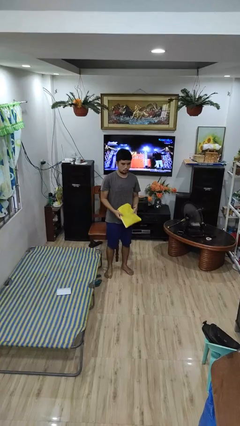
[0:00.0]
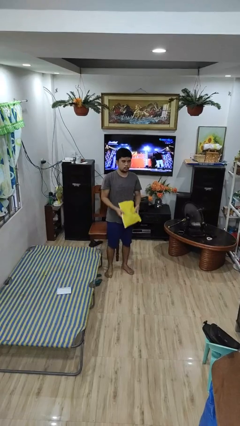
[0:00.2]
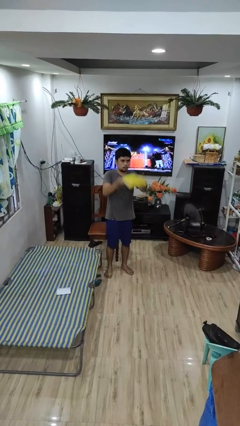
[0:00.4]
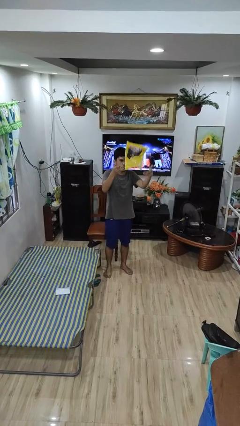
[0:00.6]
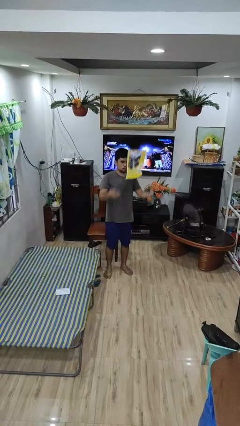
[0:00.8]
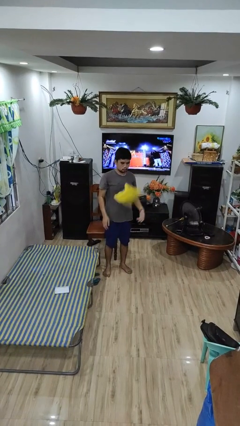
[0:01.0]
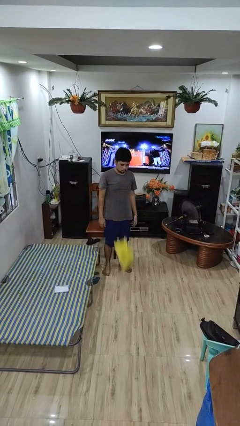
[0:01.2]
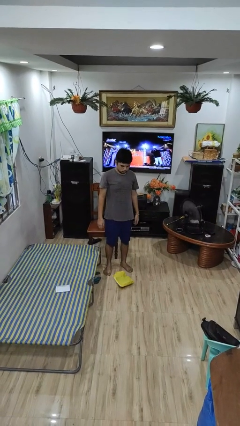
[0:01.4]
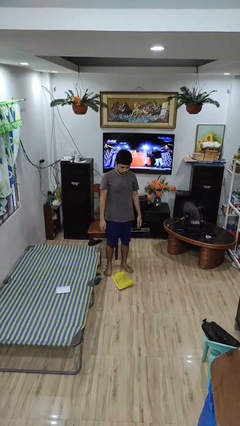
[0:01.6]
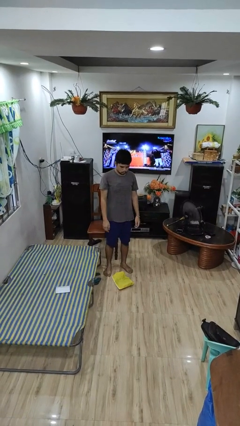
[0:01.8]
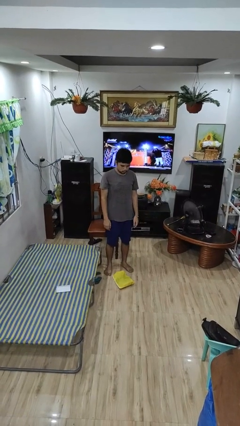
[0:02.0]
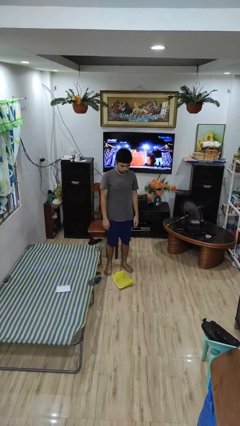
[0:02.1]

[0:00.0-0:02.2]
person throws object into air

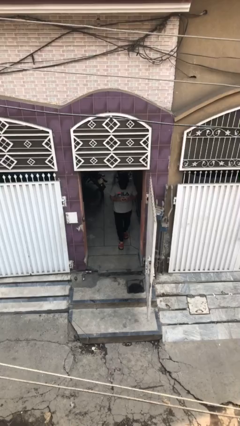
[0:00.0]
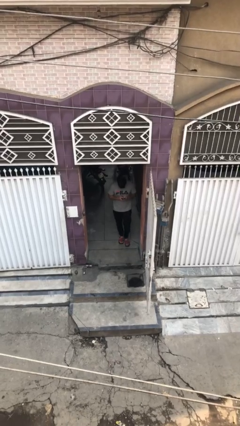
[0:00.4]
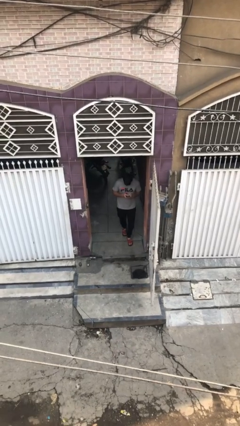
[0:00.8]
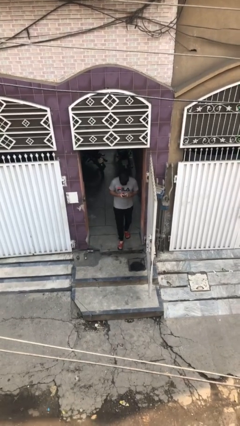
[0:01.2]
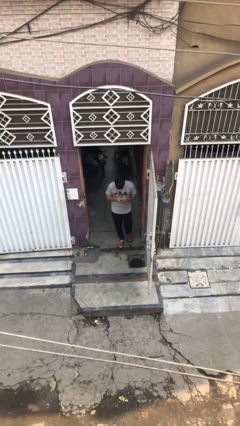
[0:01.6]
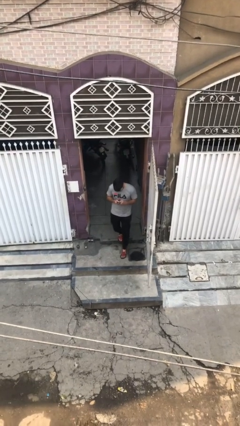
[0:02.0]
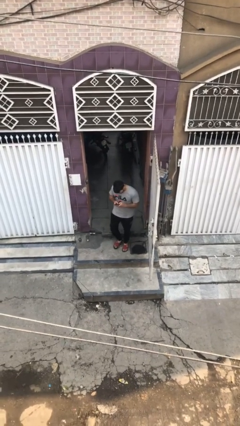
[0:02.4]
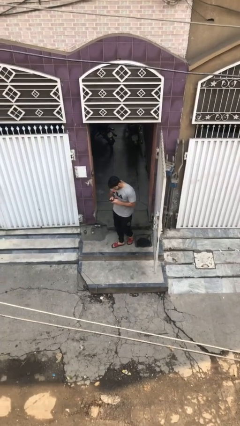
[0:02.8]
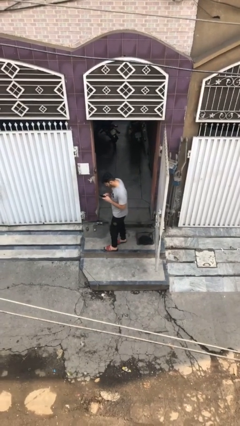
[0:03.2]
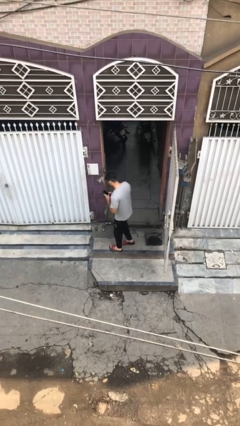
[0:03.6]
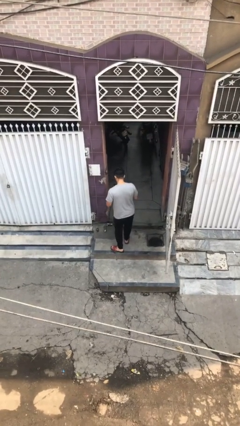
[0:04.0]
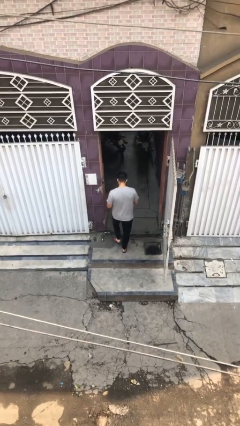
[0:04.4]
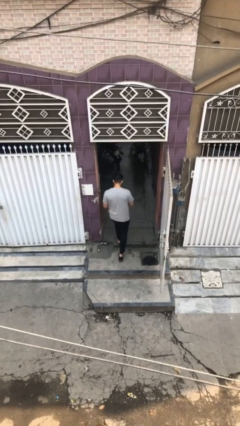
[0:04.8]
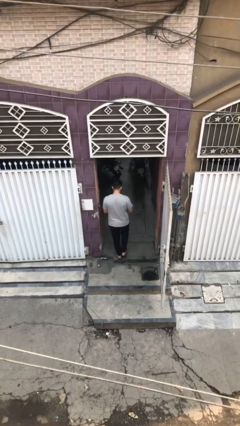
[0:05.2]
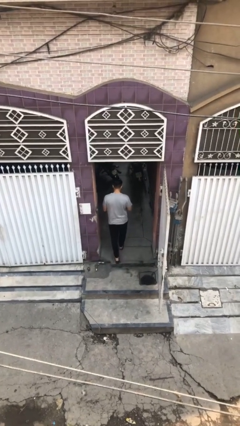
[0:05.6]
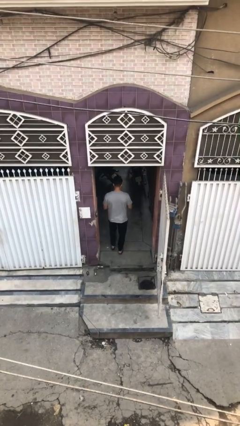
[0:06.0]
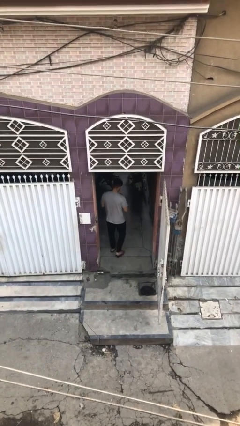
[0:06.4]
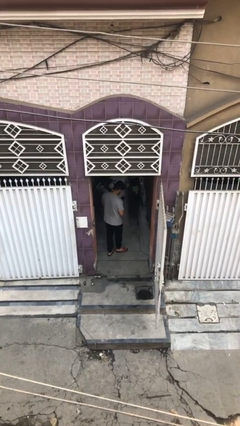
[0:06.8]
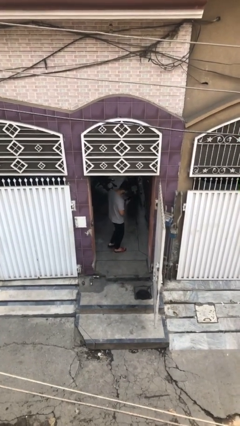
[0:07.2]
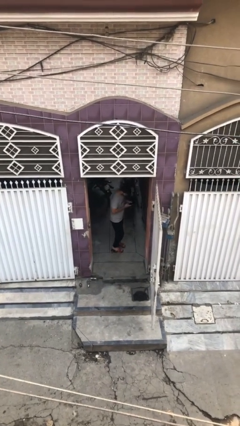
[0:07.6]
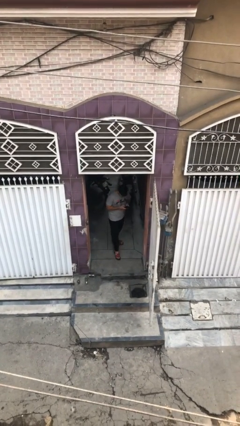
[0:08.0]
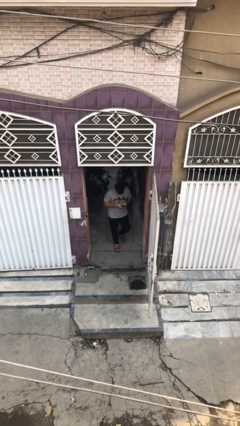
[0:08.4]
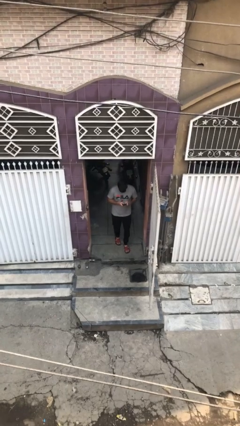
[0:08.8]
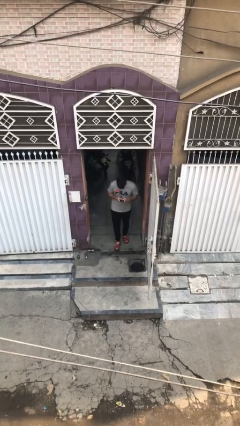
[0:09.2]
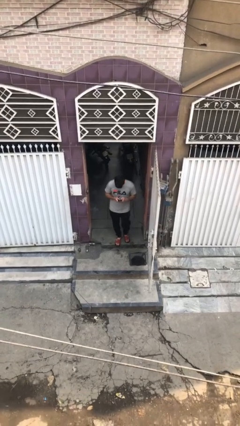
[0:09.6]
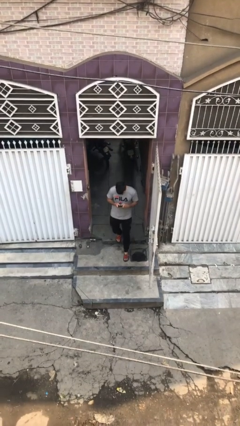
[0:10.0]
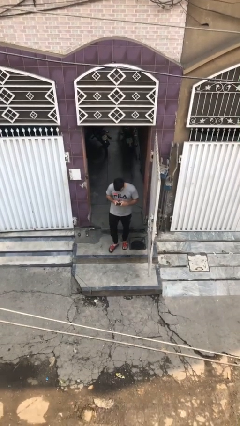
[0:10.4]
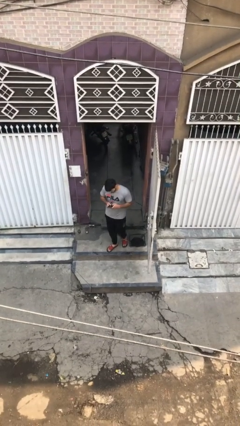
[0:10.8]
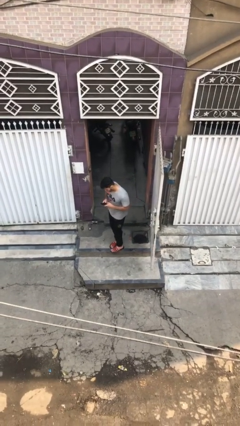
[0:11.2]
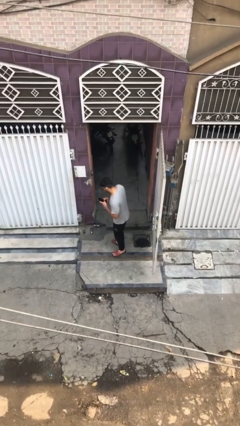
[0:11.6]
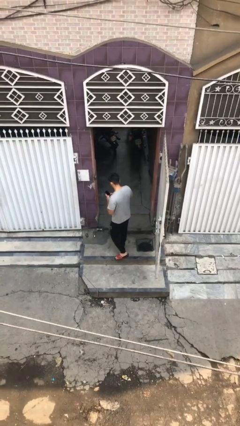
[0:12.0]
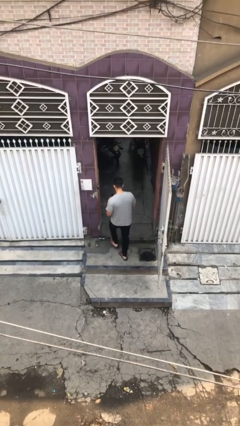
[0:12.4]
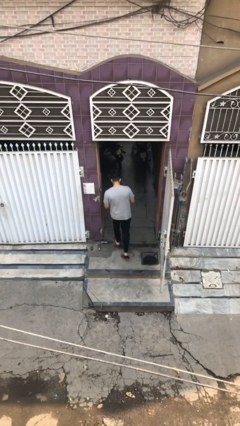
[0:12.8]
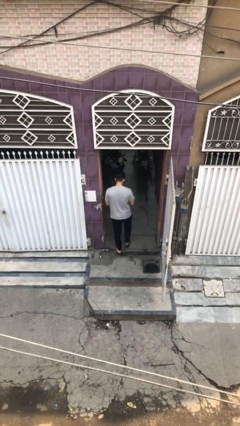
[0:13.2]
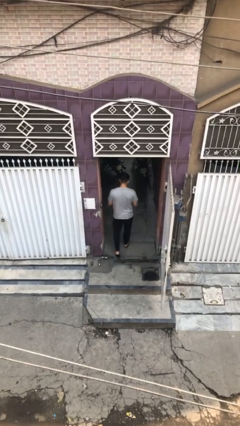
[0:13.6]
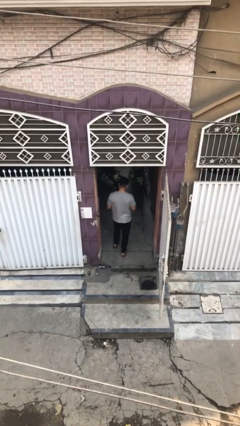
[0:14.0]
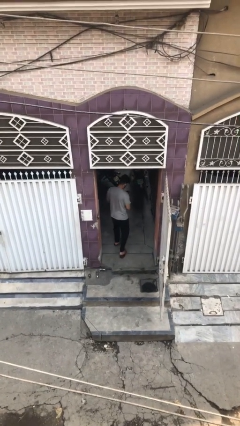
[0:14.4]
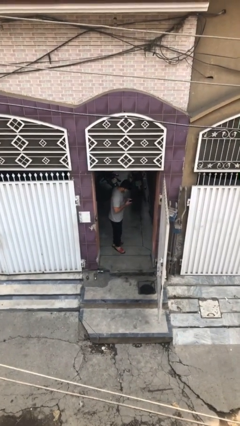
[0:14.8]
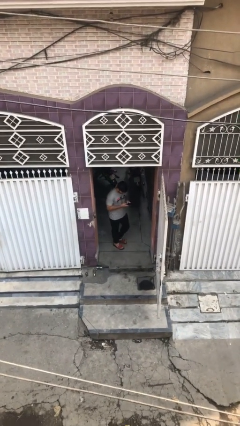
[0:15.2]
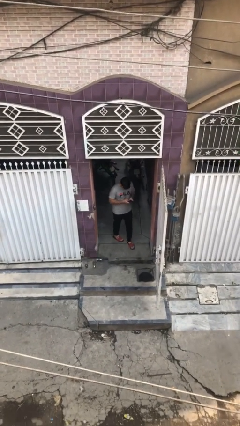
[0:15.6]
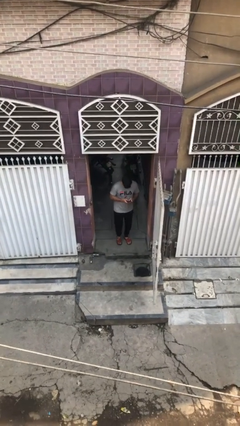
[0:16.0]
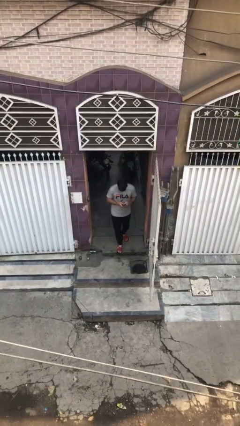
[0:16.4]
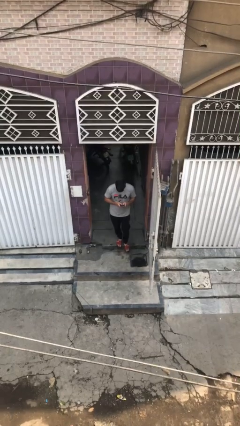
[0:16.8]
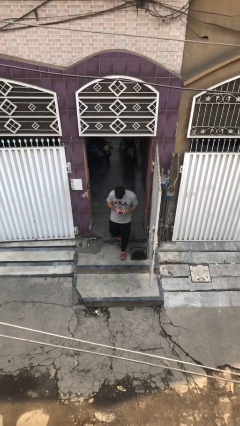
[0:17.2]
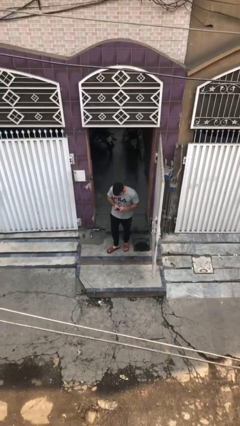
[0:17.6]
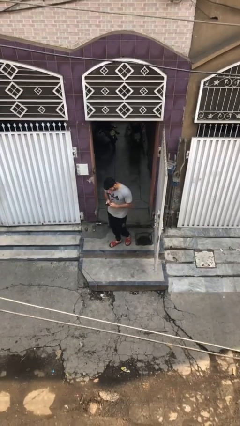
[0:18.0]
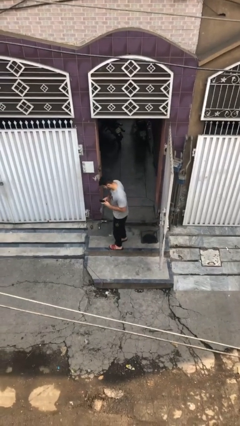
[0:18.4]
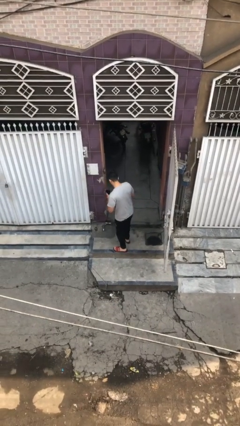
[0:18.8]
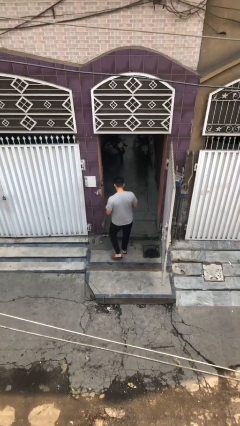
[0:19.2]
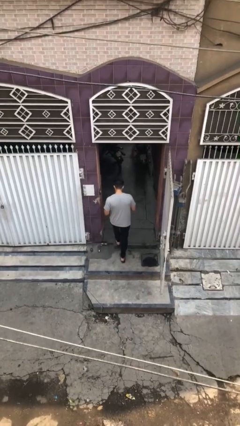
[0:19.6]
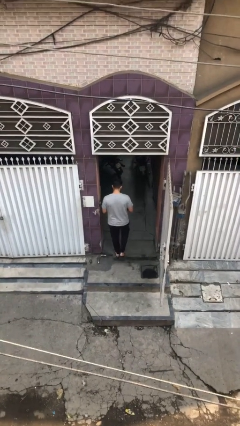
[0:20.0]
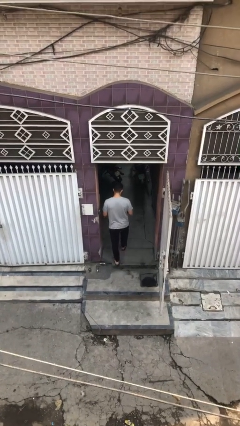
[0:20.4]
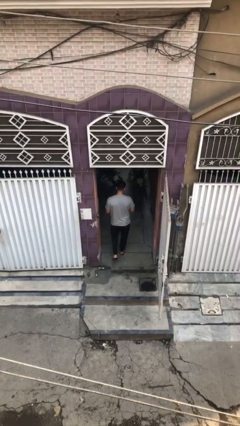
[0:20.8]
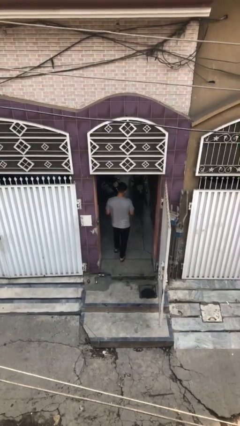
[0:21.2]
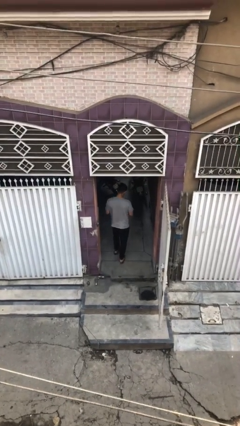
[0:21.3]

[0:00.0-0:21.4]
person texts on phone

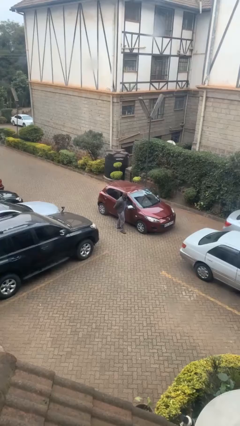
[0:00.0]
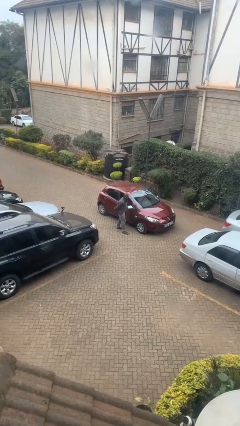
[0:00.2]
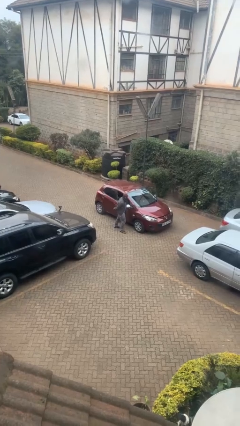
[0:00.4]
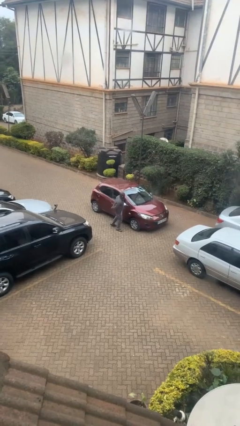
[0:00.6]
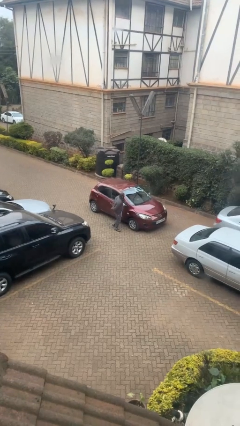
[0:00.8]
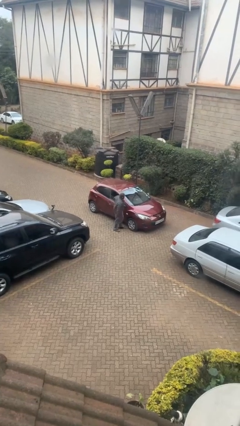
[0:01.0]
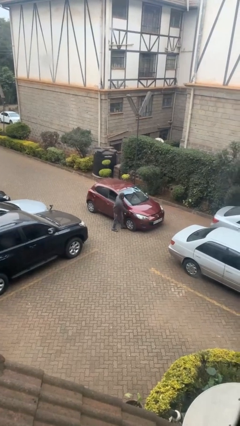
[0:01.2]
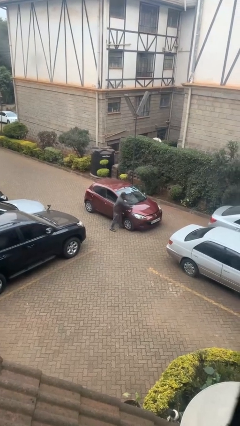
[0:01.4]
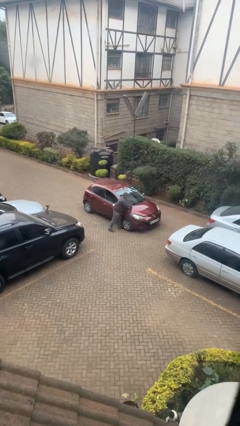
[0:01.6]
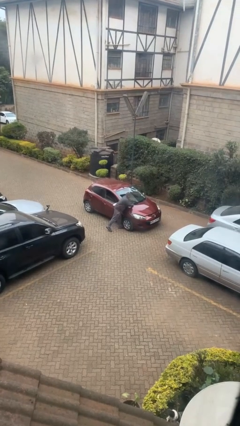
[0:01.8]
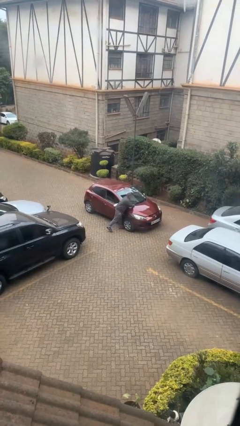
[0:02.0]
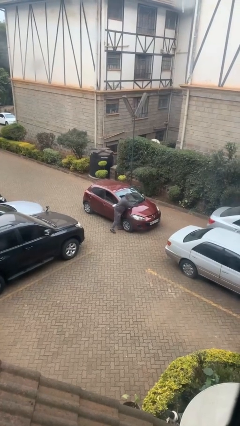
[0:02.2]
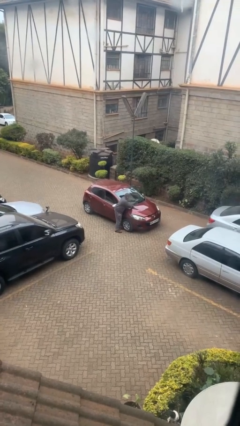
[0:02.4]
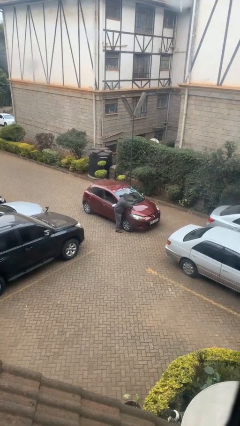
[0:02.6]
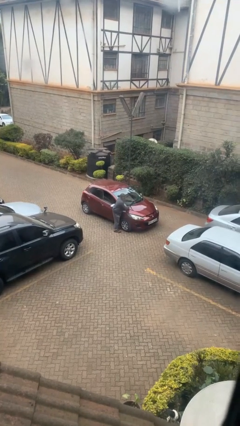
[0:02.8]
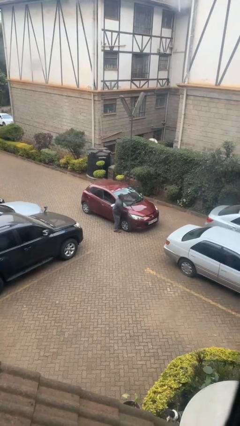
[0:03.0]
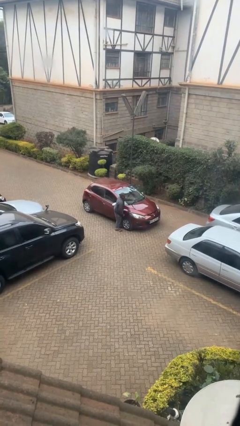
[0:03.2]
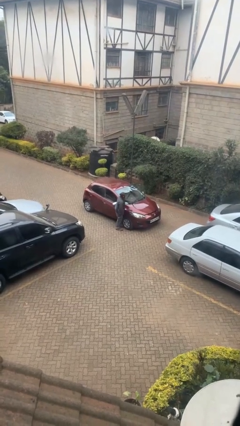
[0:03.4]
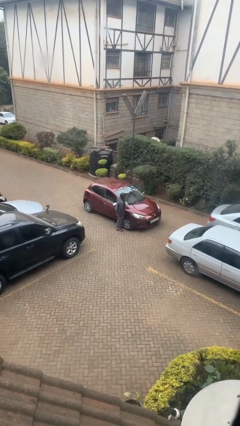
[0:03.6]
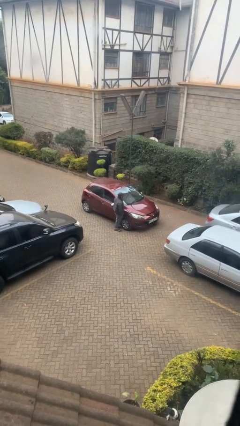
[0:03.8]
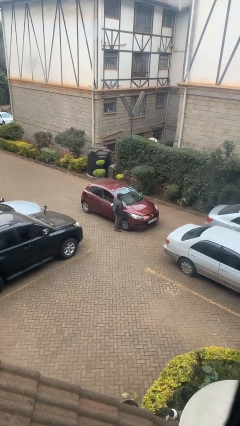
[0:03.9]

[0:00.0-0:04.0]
person flips up car wipers

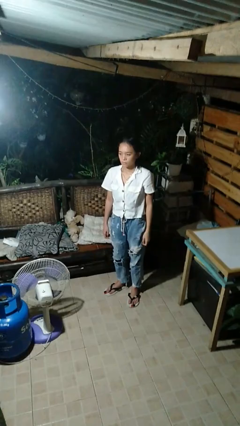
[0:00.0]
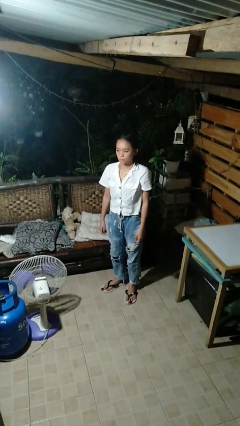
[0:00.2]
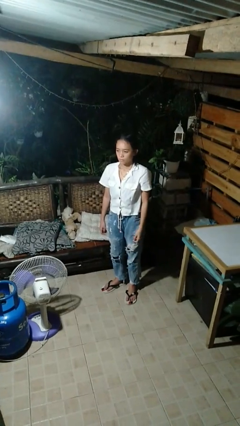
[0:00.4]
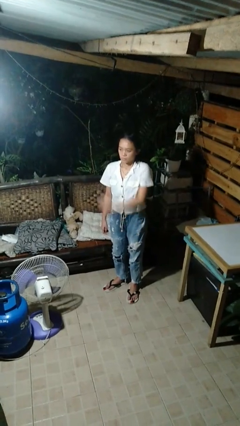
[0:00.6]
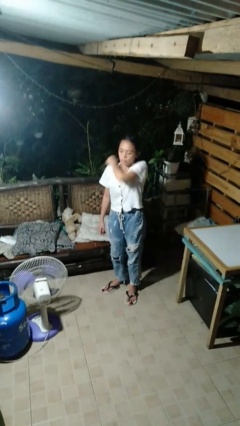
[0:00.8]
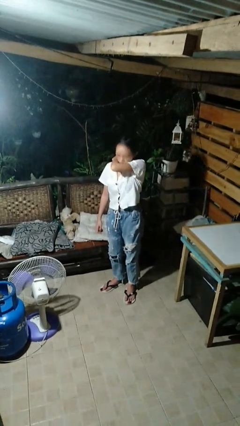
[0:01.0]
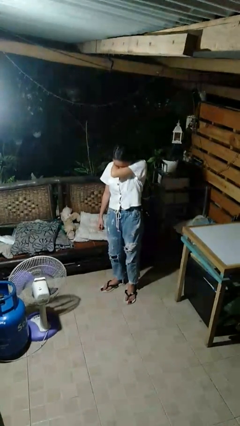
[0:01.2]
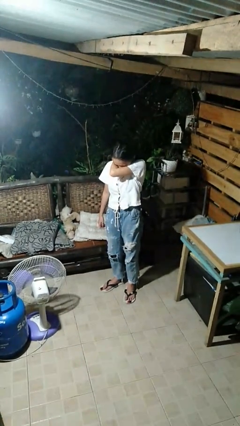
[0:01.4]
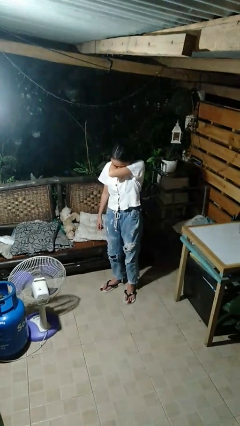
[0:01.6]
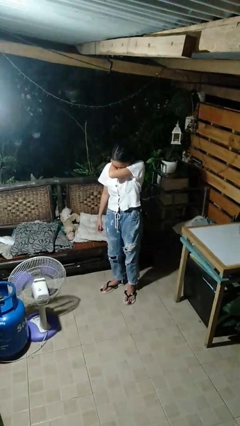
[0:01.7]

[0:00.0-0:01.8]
person sneezes into arm
